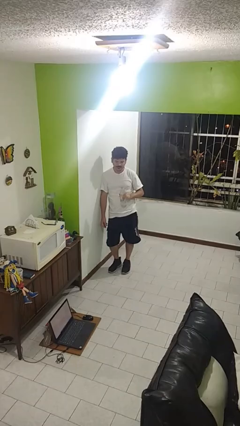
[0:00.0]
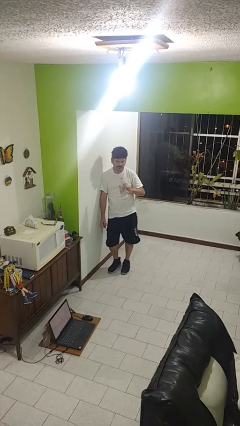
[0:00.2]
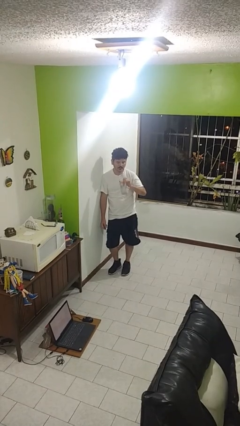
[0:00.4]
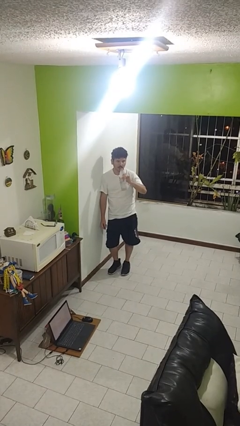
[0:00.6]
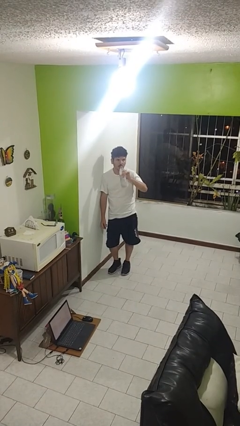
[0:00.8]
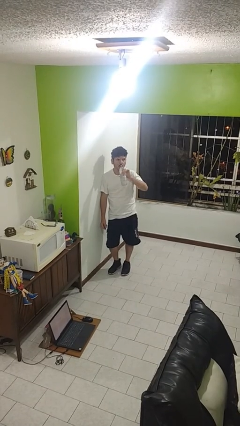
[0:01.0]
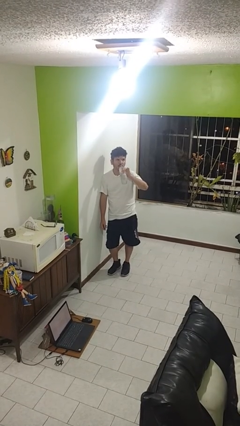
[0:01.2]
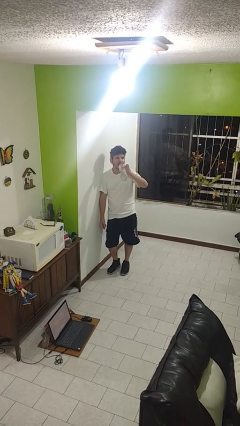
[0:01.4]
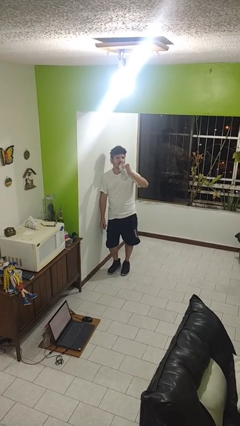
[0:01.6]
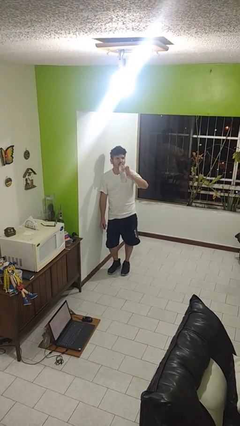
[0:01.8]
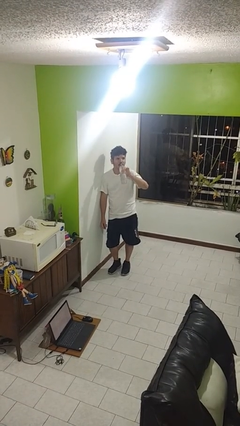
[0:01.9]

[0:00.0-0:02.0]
person drinks from bottle

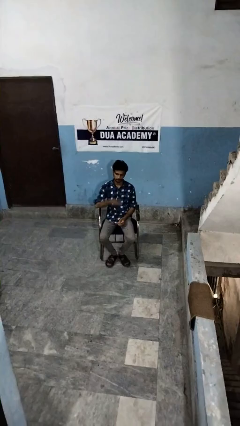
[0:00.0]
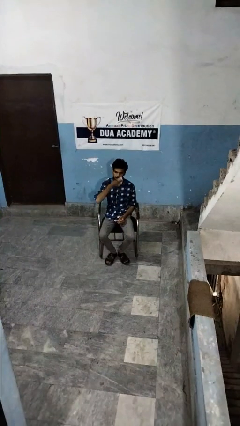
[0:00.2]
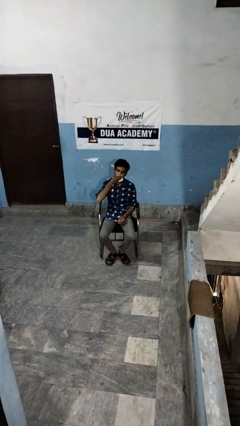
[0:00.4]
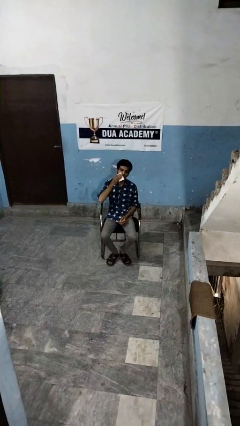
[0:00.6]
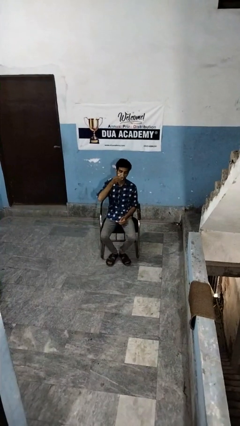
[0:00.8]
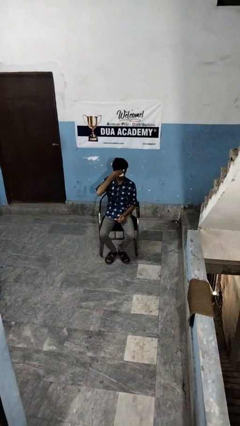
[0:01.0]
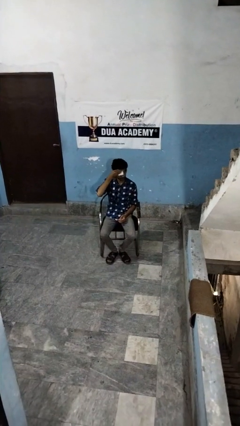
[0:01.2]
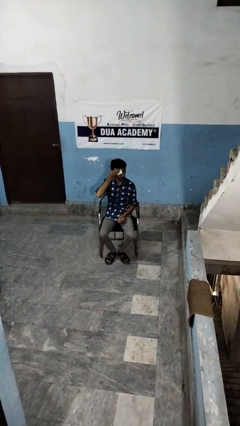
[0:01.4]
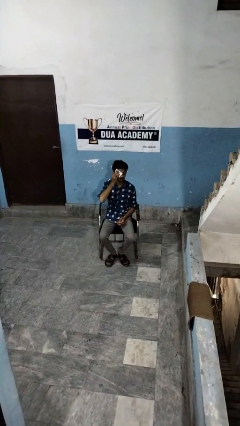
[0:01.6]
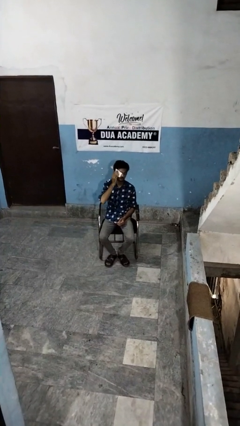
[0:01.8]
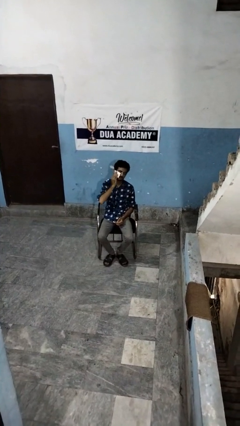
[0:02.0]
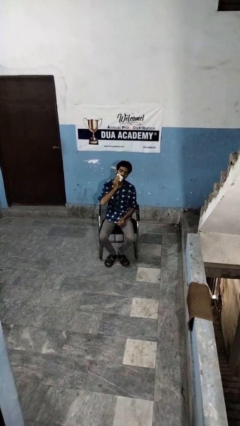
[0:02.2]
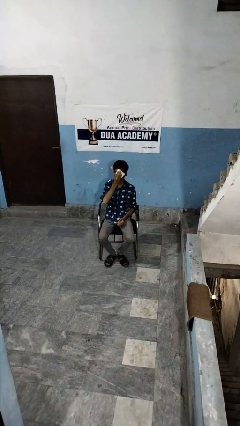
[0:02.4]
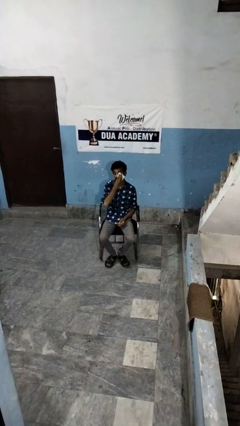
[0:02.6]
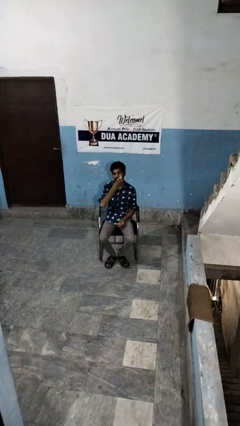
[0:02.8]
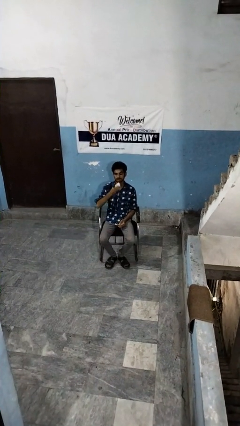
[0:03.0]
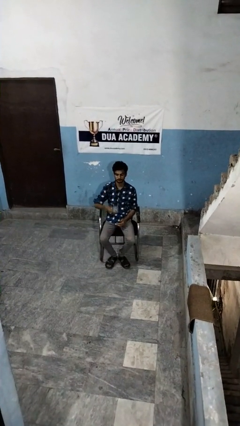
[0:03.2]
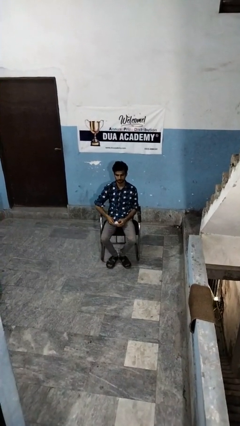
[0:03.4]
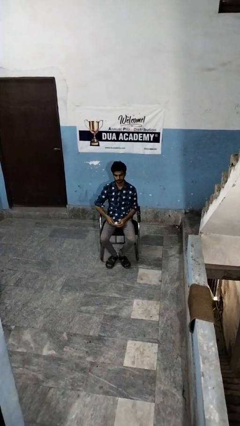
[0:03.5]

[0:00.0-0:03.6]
person wipes mouth with napkin

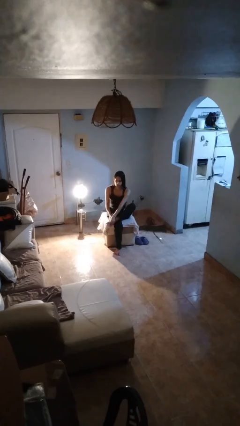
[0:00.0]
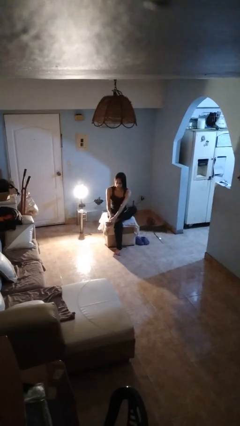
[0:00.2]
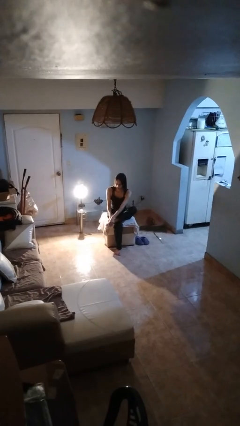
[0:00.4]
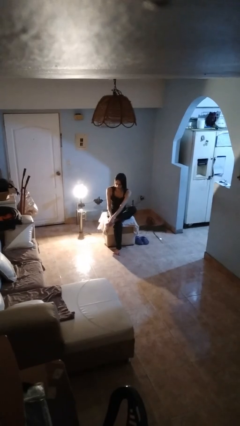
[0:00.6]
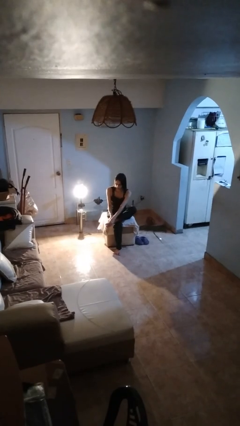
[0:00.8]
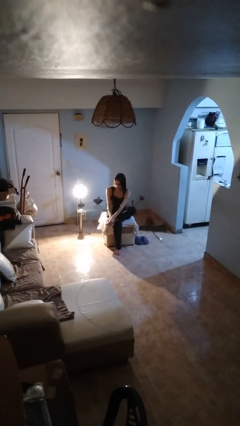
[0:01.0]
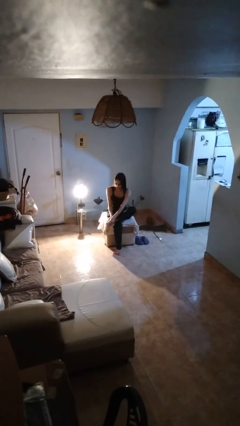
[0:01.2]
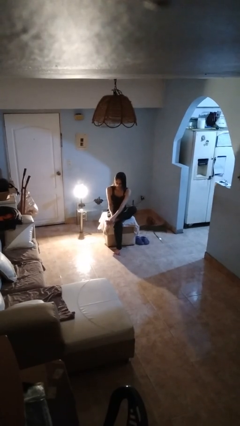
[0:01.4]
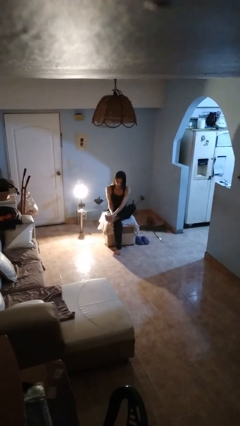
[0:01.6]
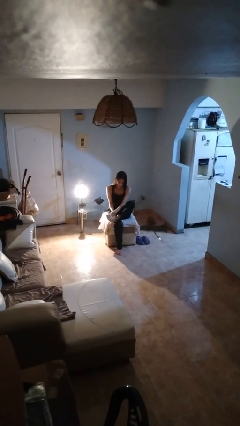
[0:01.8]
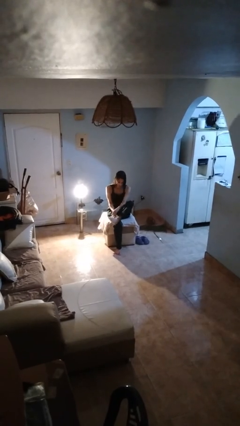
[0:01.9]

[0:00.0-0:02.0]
person rubs foot

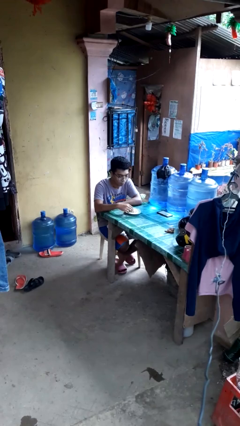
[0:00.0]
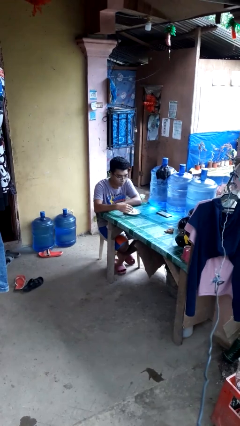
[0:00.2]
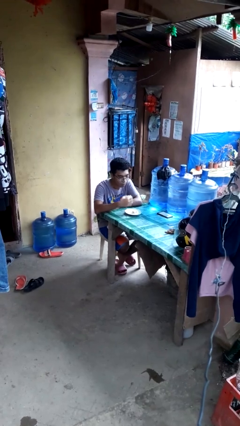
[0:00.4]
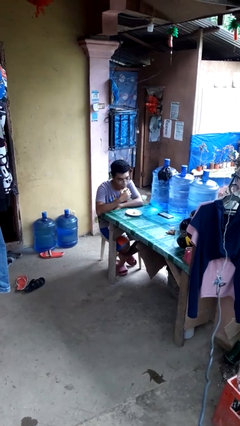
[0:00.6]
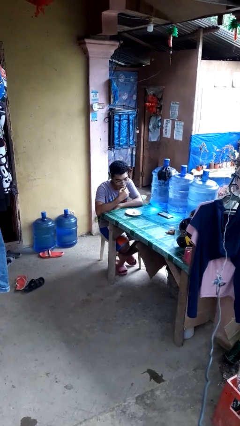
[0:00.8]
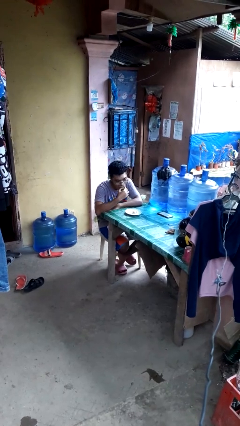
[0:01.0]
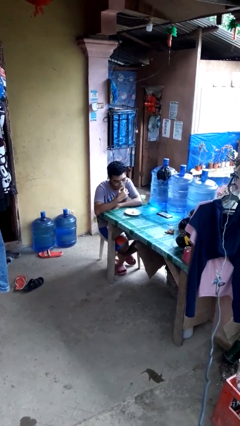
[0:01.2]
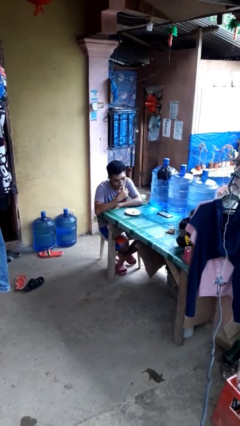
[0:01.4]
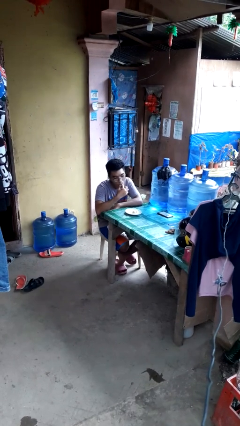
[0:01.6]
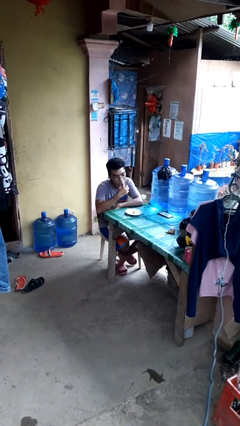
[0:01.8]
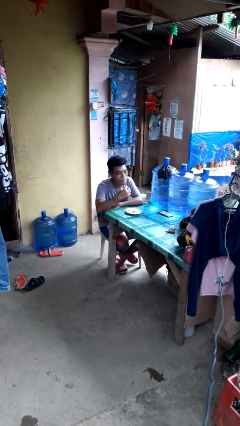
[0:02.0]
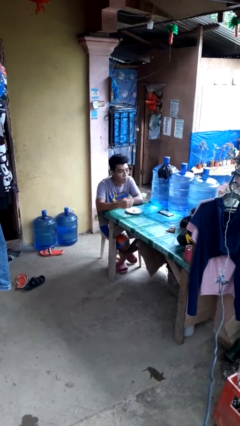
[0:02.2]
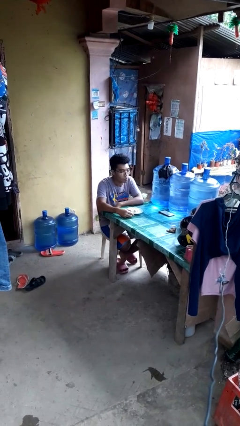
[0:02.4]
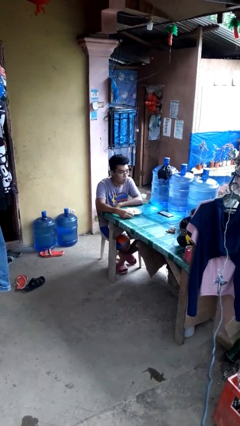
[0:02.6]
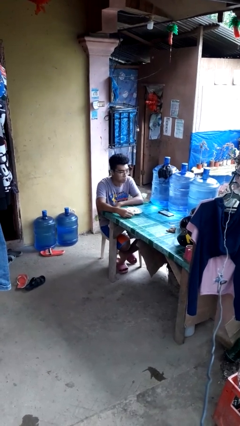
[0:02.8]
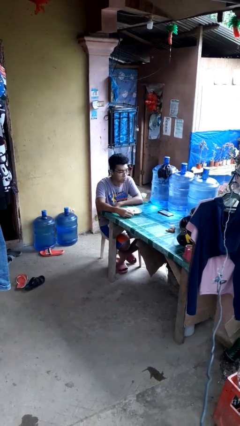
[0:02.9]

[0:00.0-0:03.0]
person eats with hands

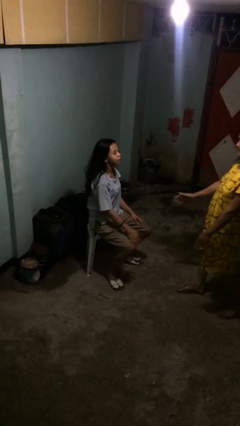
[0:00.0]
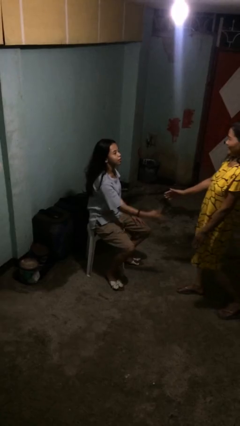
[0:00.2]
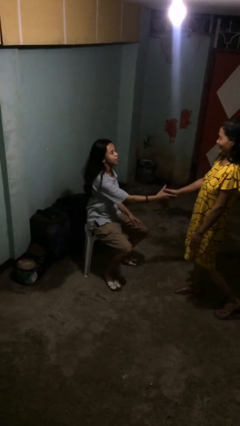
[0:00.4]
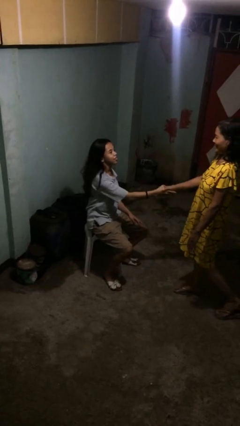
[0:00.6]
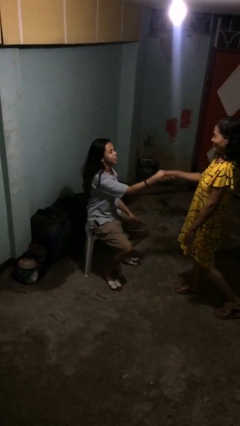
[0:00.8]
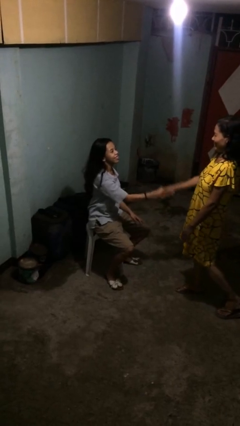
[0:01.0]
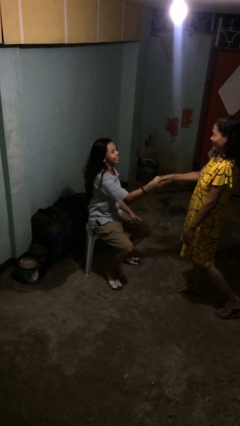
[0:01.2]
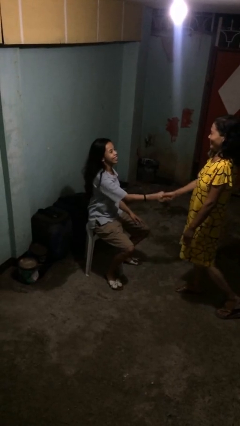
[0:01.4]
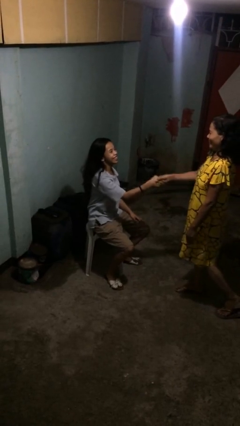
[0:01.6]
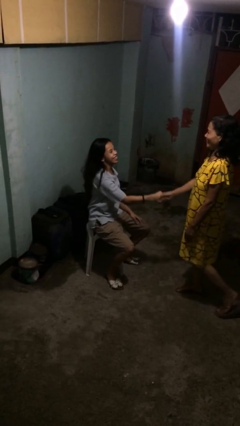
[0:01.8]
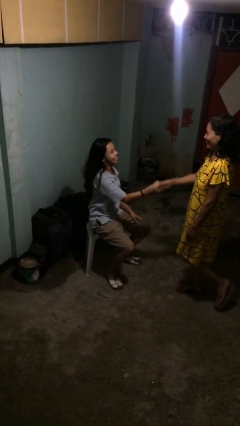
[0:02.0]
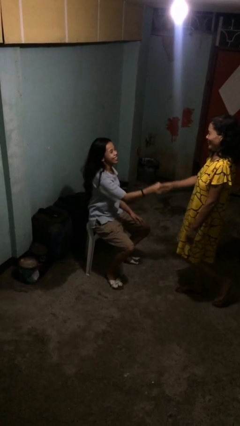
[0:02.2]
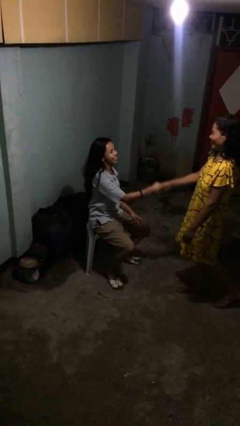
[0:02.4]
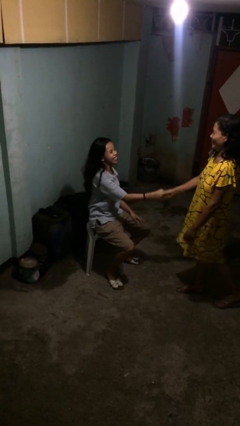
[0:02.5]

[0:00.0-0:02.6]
person shakes hand

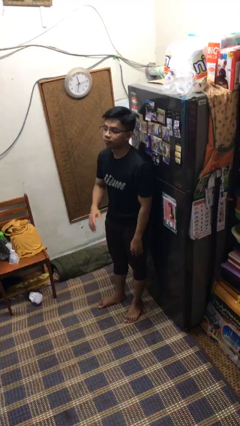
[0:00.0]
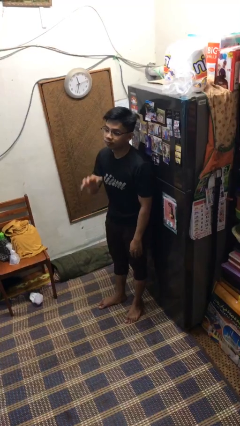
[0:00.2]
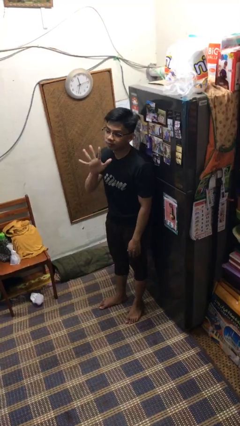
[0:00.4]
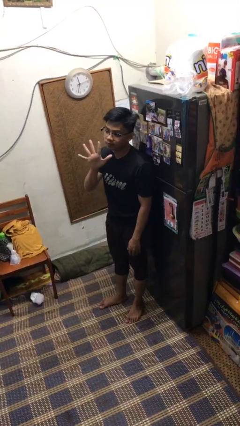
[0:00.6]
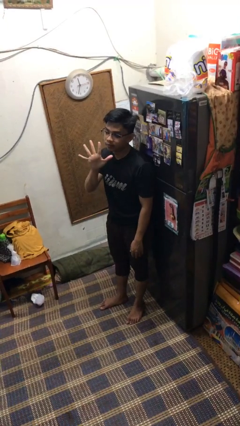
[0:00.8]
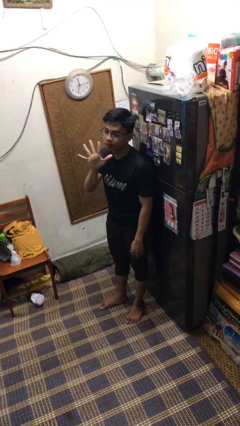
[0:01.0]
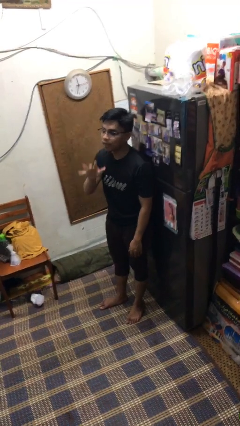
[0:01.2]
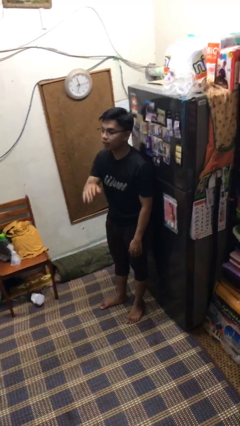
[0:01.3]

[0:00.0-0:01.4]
person gestures number five

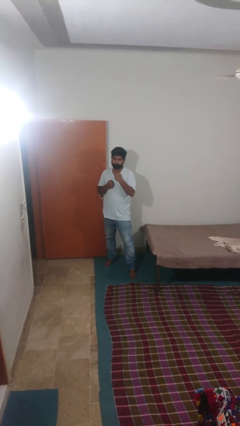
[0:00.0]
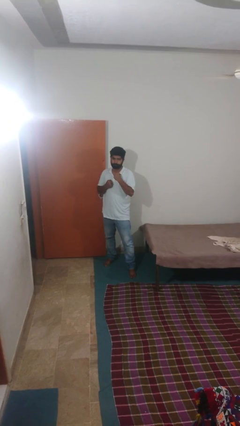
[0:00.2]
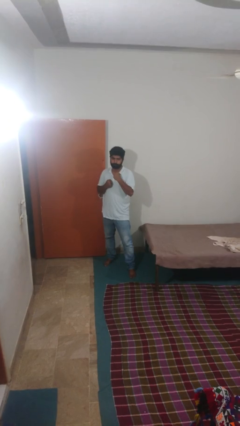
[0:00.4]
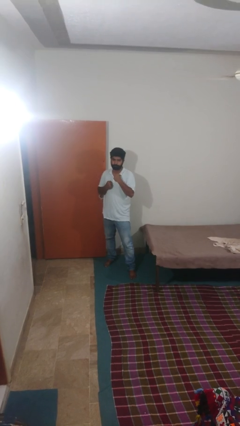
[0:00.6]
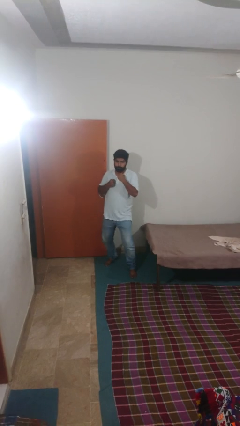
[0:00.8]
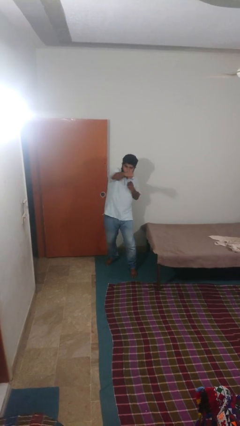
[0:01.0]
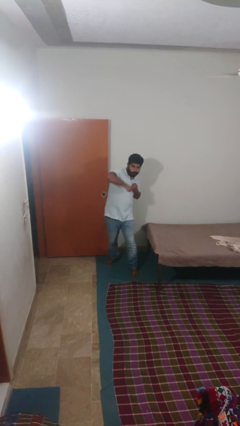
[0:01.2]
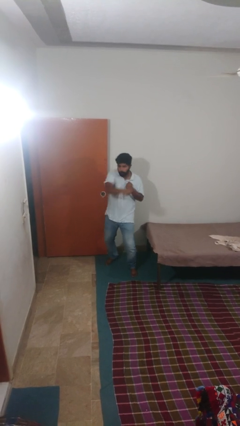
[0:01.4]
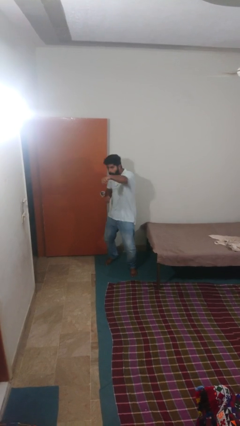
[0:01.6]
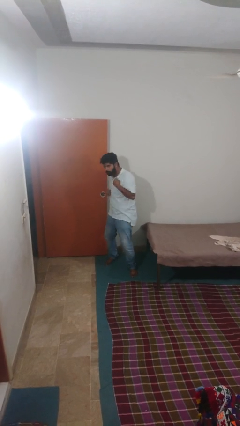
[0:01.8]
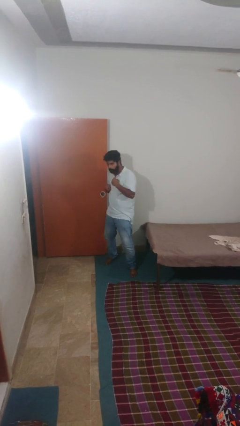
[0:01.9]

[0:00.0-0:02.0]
person punches

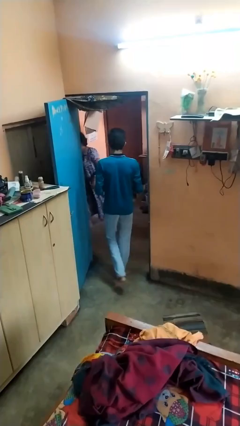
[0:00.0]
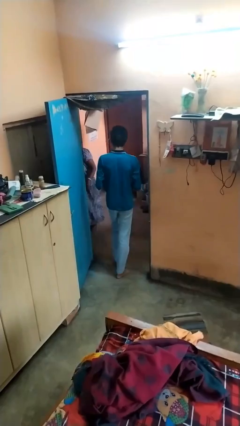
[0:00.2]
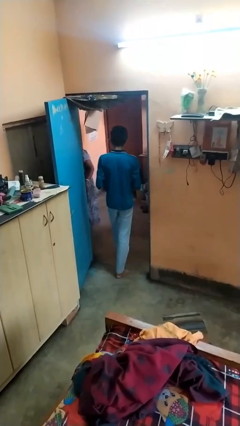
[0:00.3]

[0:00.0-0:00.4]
person exits scene through structure
